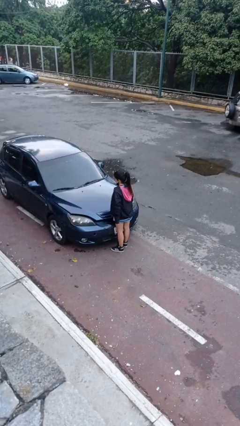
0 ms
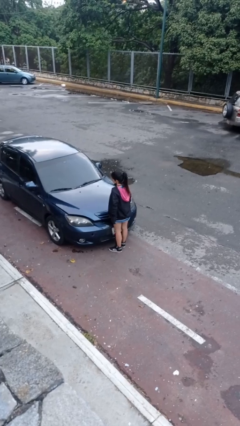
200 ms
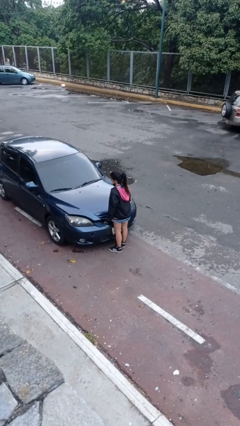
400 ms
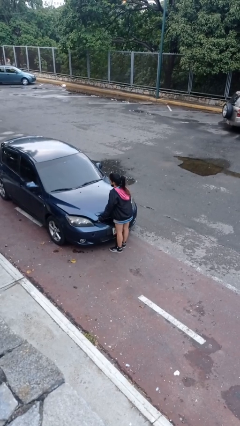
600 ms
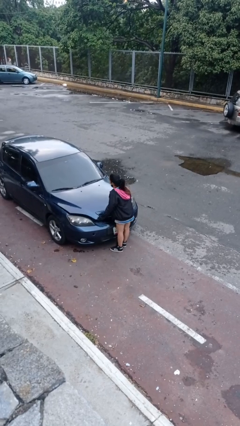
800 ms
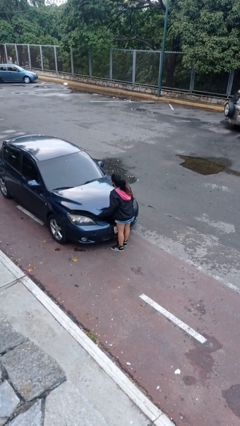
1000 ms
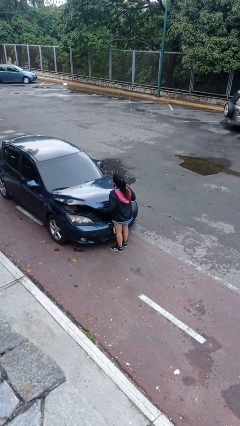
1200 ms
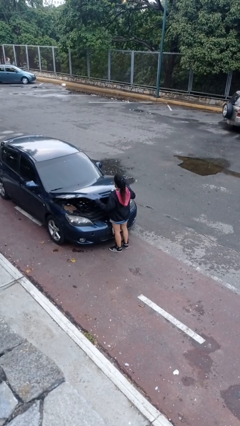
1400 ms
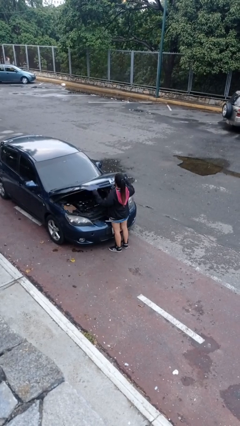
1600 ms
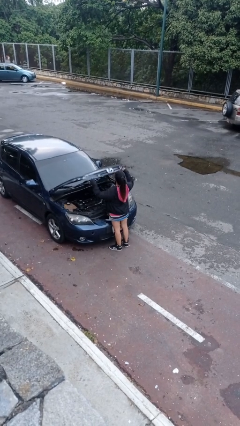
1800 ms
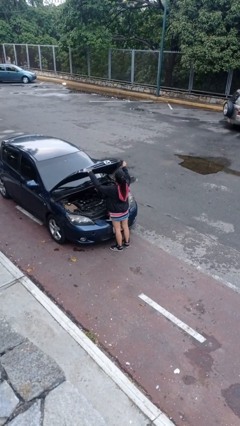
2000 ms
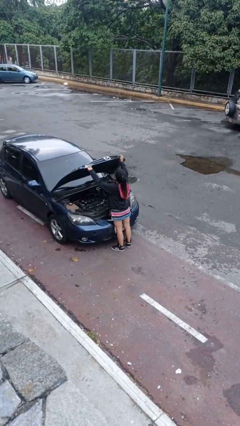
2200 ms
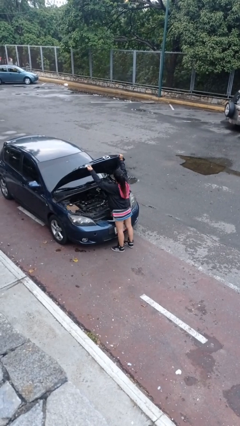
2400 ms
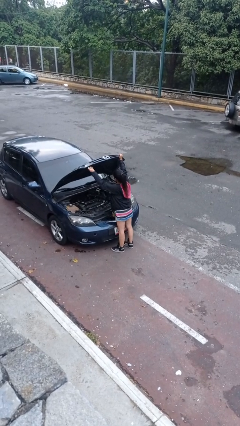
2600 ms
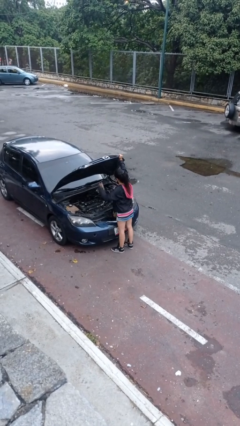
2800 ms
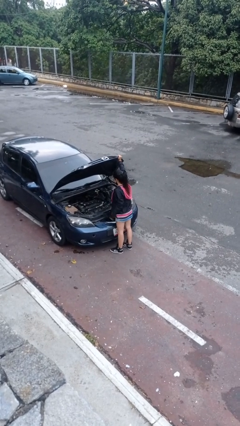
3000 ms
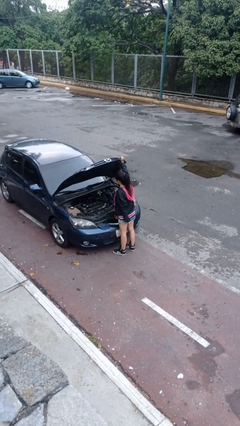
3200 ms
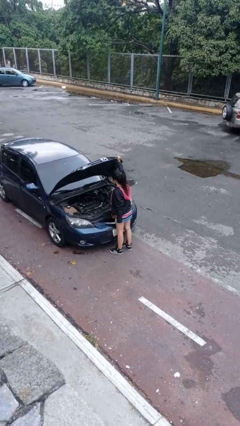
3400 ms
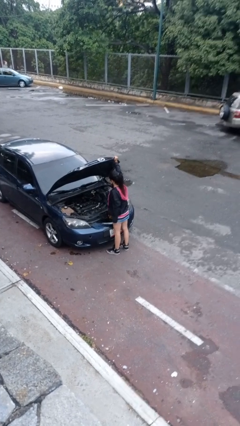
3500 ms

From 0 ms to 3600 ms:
person opens car hood

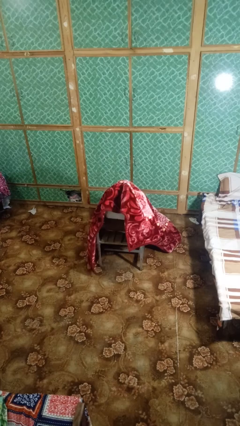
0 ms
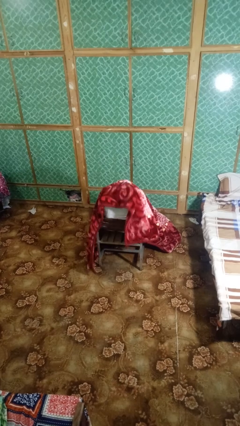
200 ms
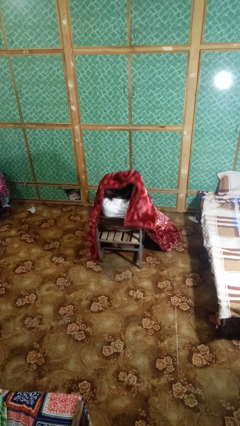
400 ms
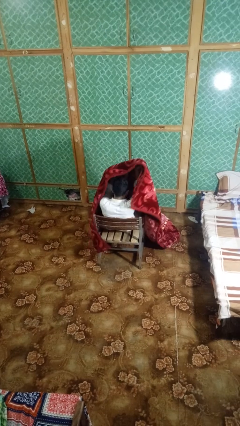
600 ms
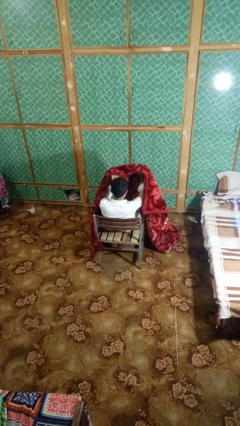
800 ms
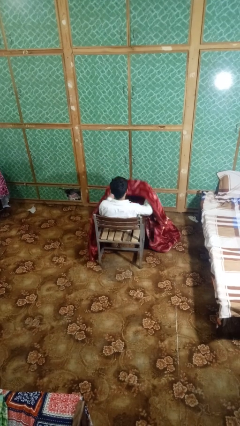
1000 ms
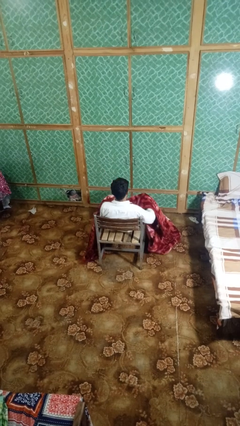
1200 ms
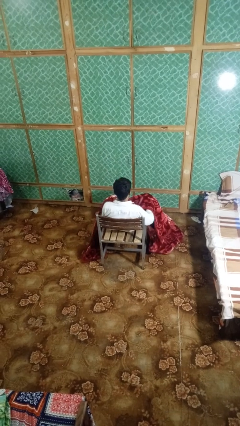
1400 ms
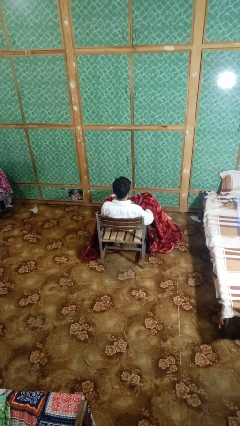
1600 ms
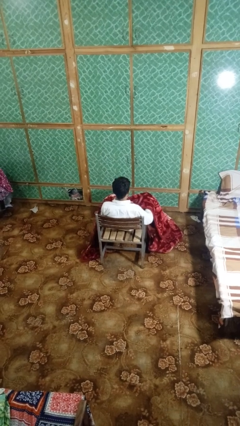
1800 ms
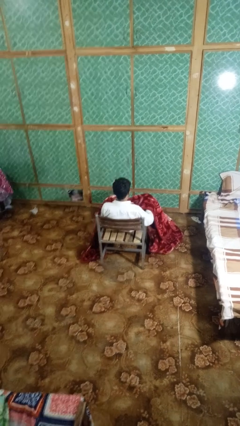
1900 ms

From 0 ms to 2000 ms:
person uncovers with blanket

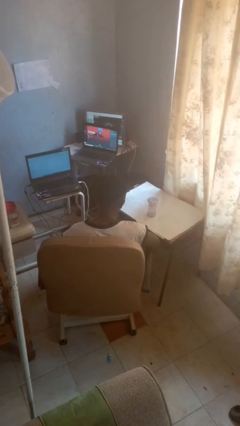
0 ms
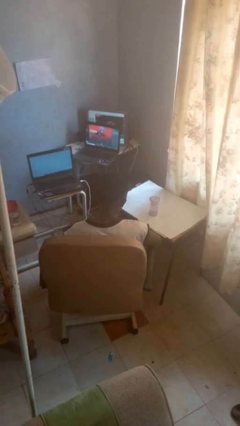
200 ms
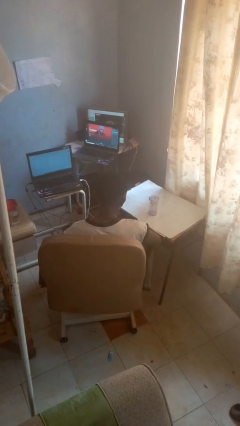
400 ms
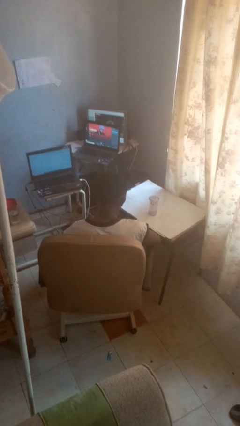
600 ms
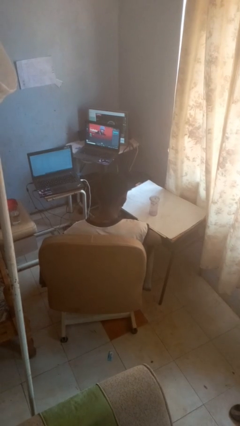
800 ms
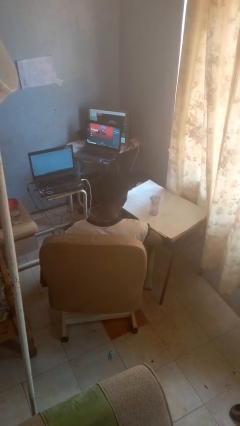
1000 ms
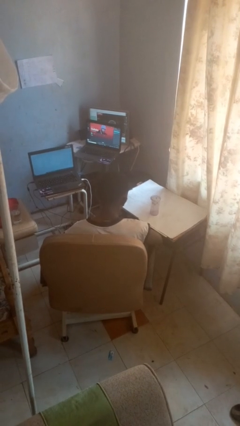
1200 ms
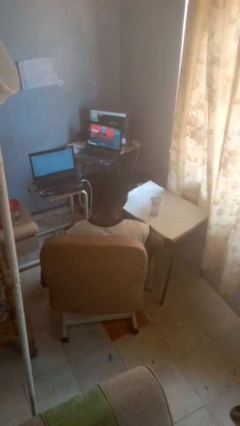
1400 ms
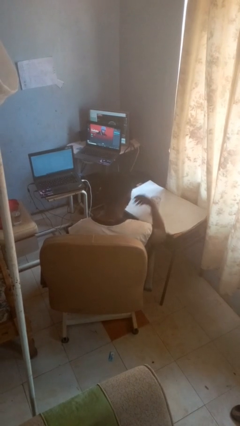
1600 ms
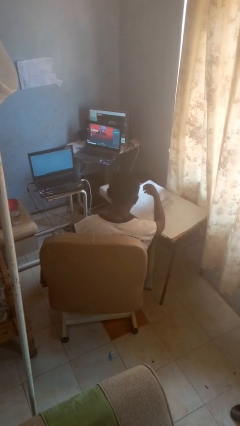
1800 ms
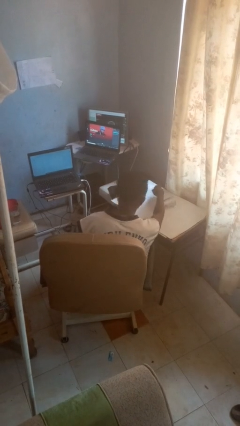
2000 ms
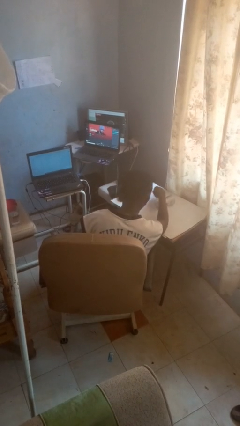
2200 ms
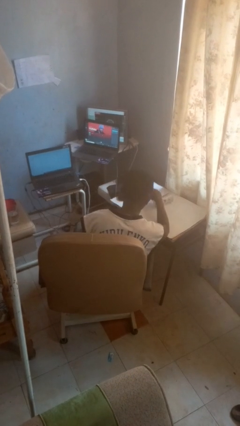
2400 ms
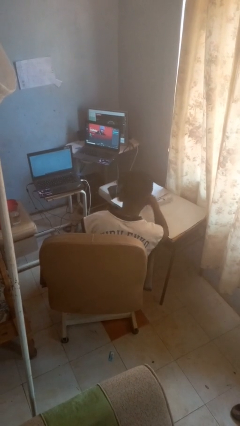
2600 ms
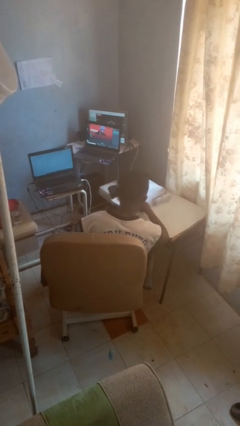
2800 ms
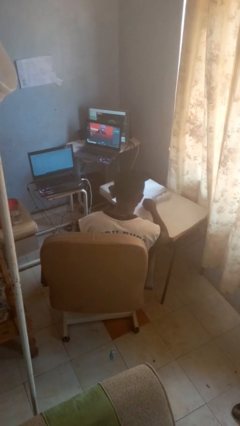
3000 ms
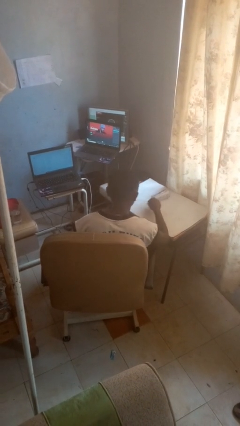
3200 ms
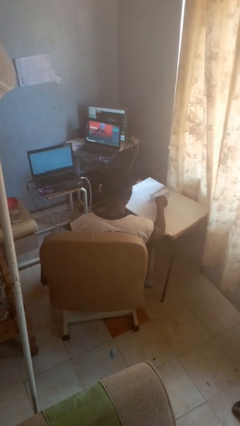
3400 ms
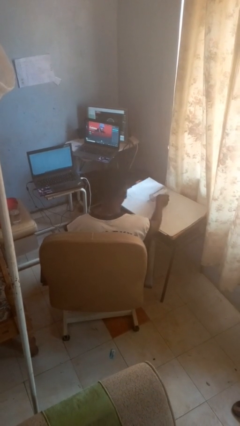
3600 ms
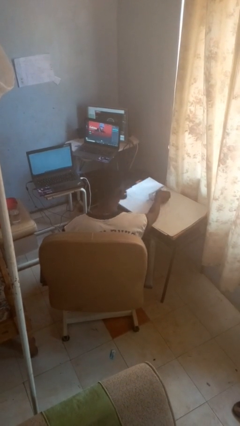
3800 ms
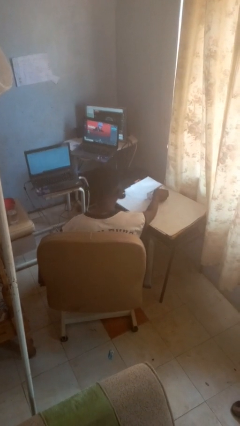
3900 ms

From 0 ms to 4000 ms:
person knocks over glass

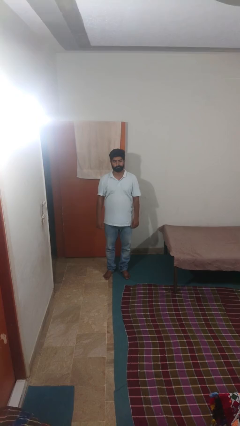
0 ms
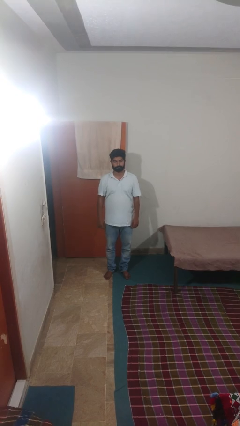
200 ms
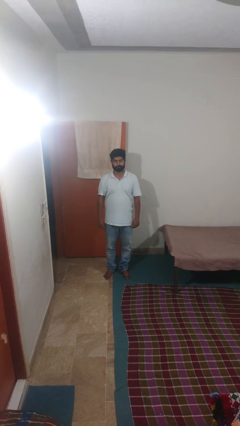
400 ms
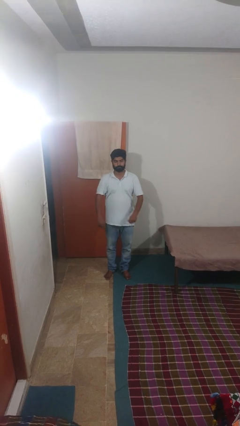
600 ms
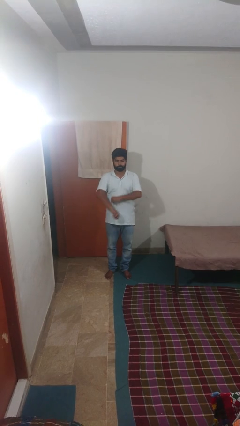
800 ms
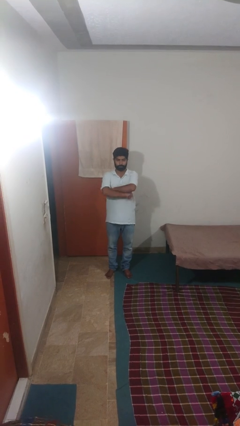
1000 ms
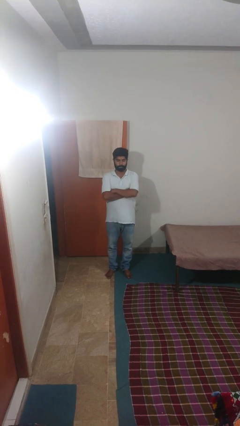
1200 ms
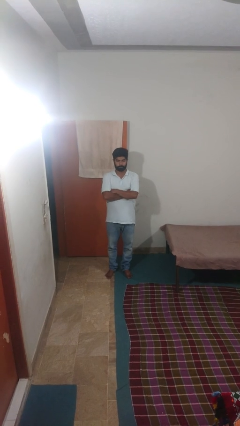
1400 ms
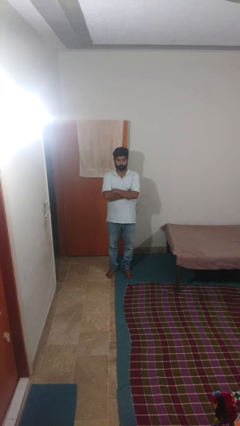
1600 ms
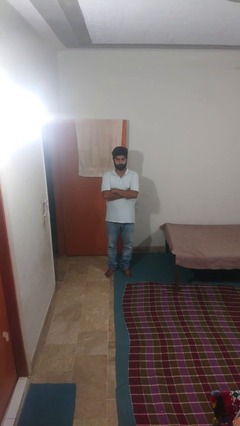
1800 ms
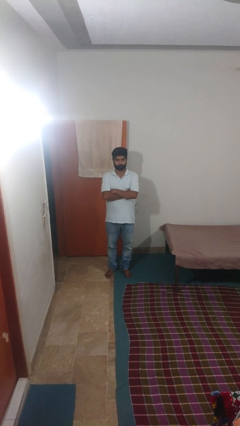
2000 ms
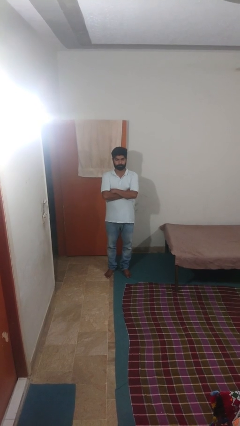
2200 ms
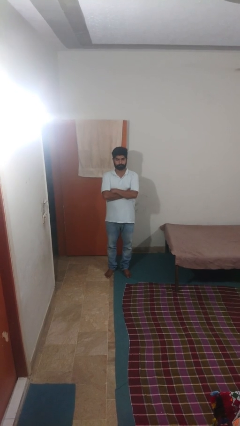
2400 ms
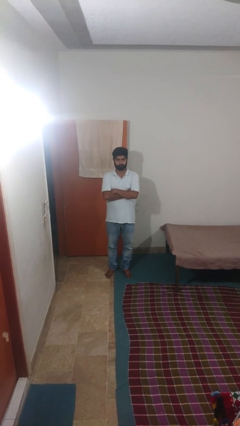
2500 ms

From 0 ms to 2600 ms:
person crosses arms

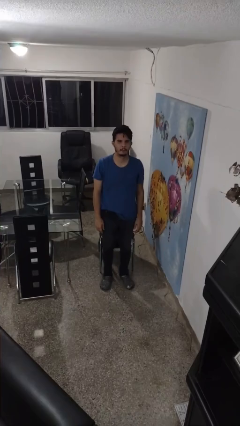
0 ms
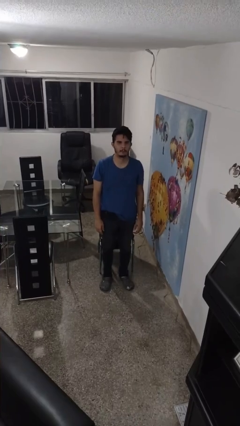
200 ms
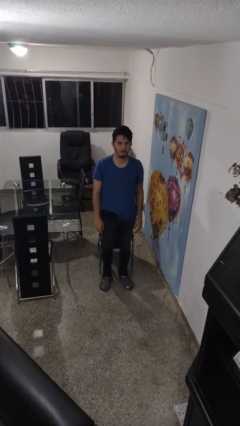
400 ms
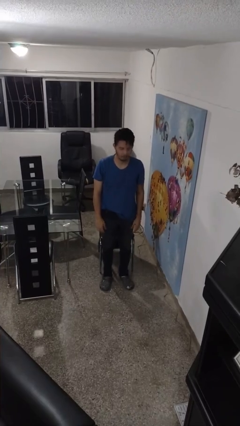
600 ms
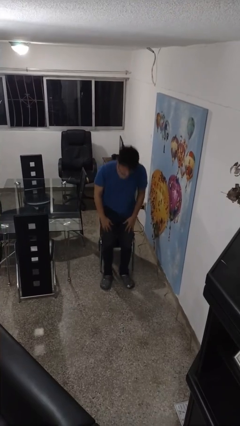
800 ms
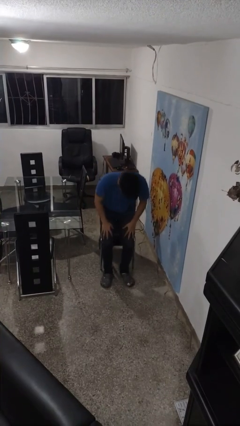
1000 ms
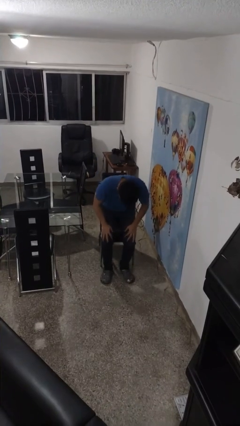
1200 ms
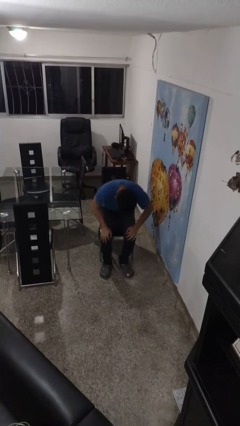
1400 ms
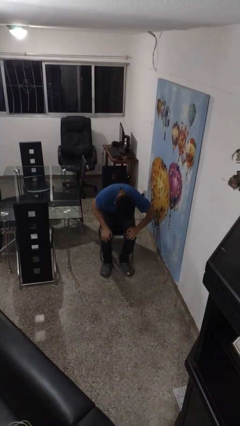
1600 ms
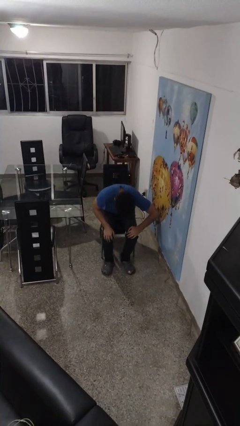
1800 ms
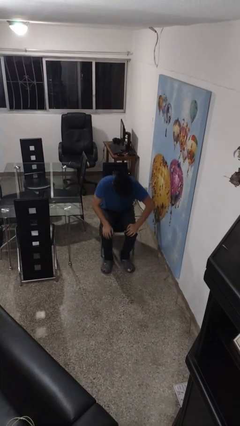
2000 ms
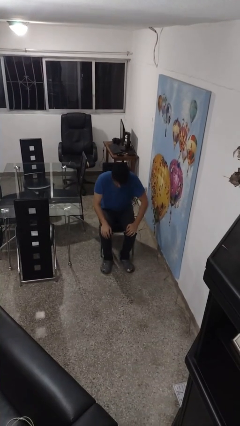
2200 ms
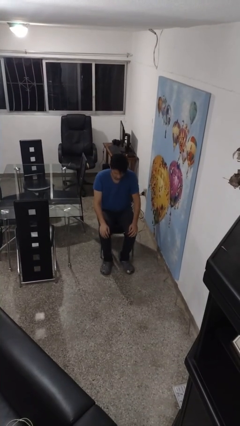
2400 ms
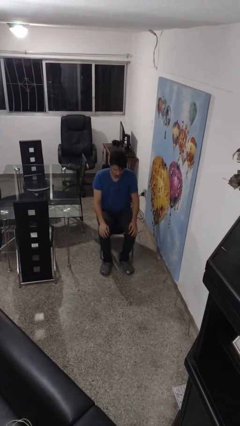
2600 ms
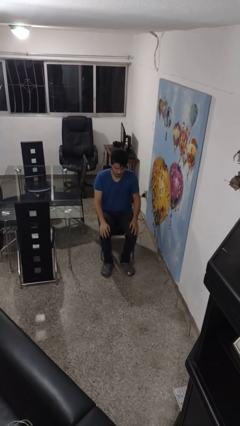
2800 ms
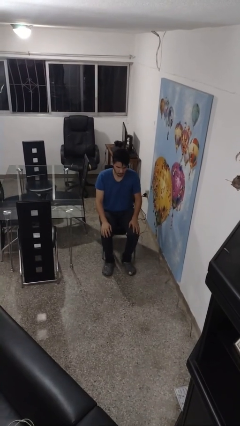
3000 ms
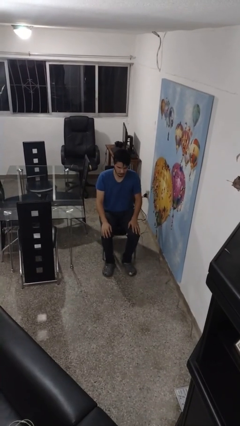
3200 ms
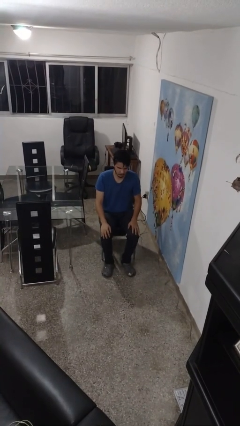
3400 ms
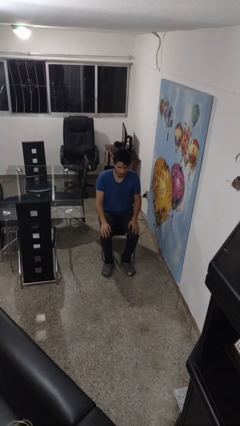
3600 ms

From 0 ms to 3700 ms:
person sits down

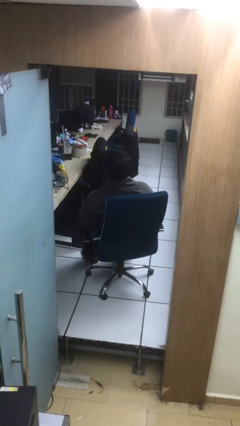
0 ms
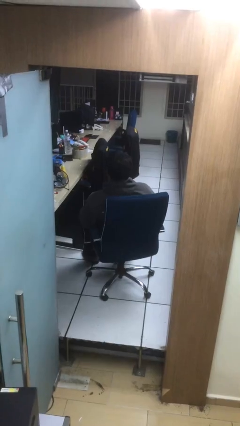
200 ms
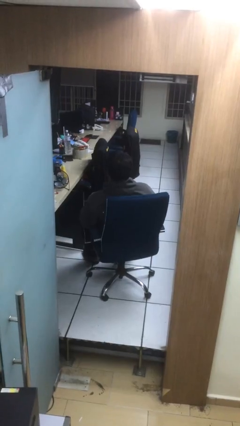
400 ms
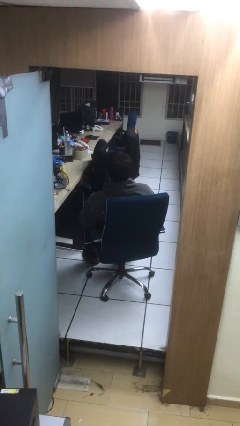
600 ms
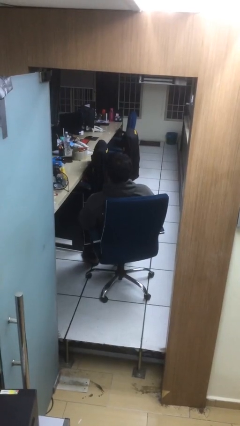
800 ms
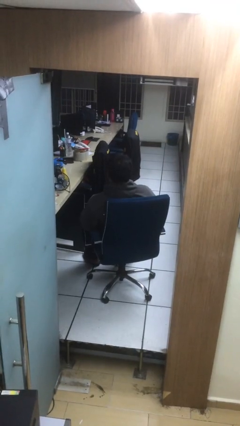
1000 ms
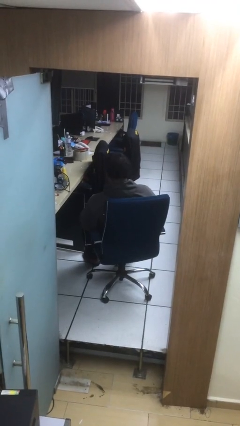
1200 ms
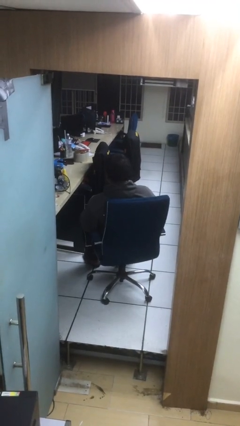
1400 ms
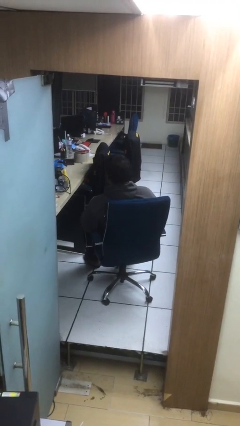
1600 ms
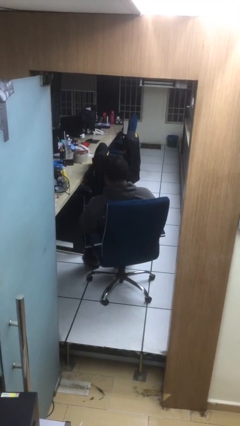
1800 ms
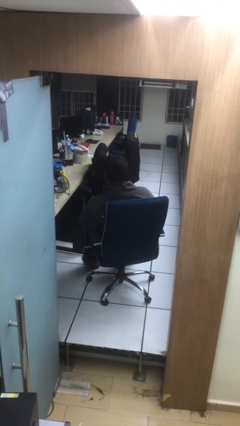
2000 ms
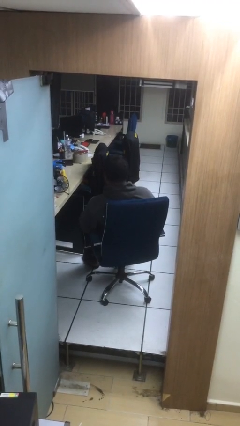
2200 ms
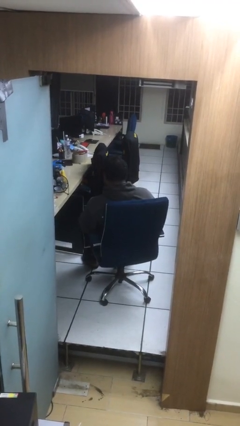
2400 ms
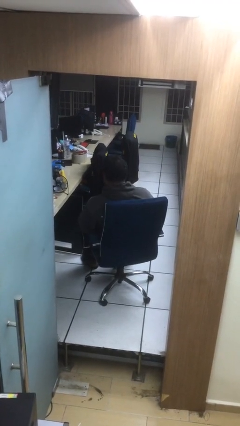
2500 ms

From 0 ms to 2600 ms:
person nods head
